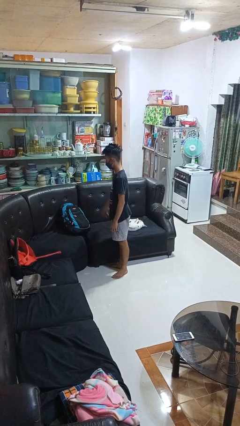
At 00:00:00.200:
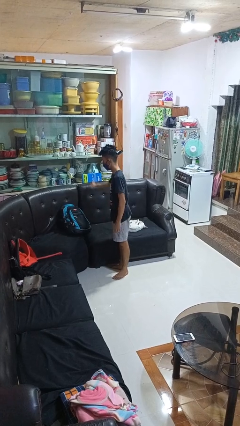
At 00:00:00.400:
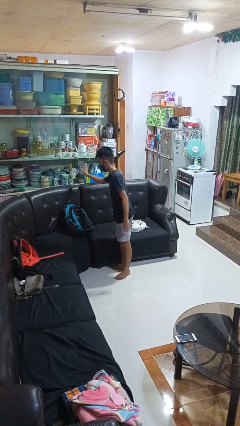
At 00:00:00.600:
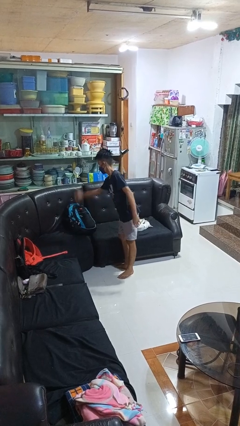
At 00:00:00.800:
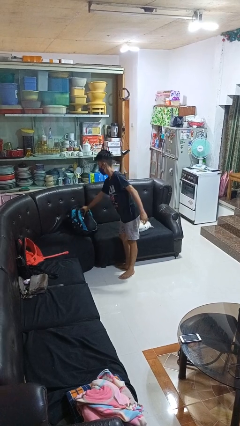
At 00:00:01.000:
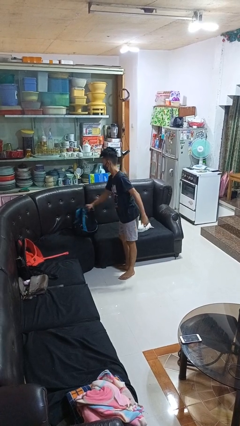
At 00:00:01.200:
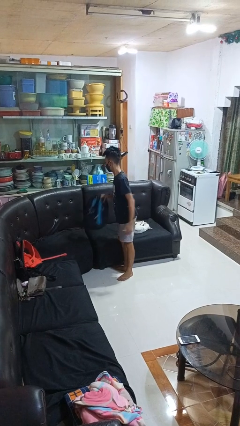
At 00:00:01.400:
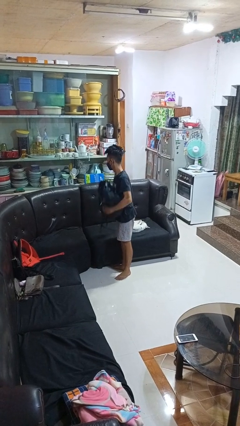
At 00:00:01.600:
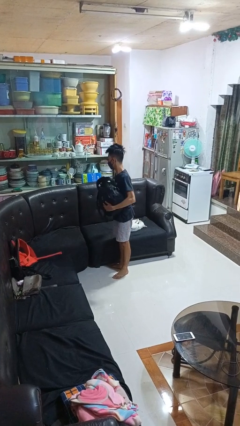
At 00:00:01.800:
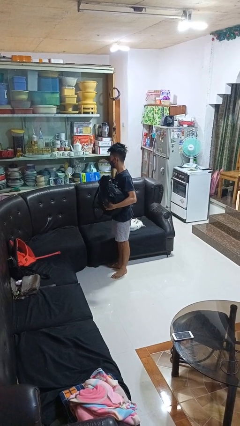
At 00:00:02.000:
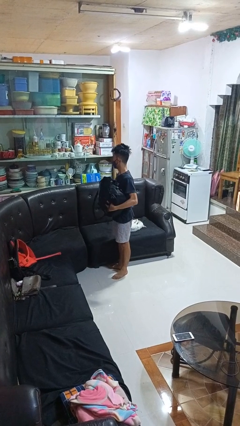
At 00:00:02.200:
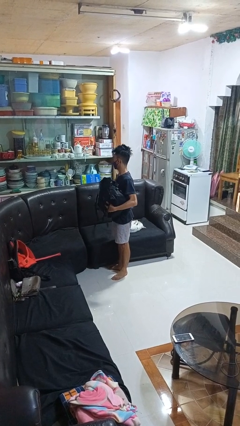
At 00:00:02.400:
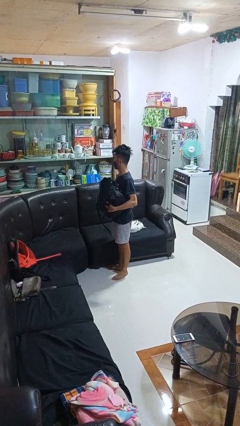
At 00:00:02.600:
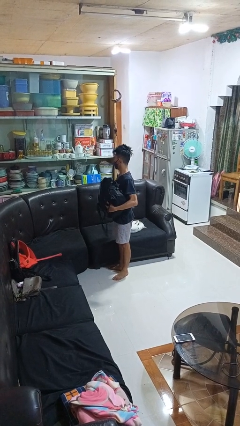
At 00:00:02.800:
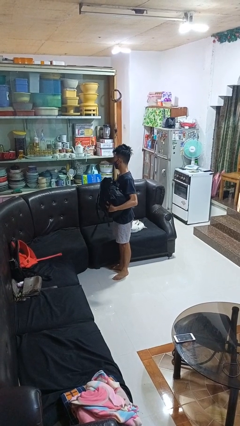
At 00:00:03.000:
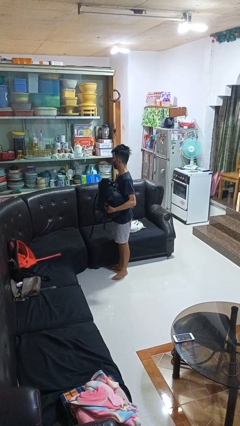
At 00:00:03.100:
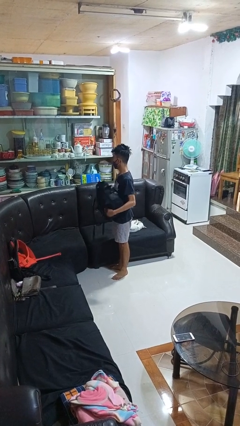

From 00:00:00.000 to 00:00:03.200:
person picks up object from couch

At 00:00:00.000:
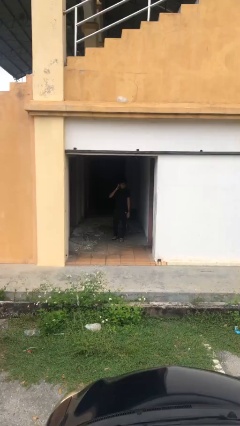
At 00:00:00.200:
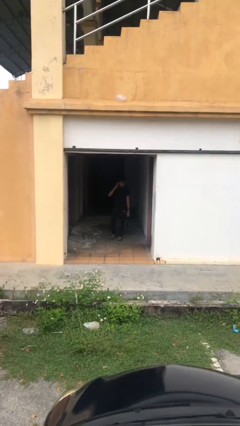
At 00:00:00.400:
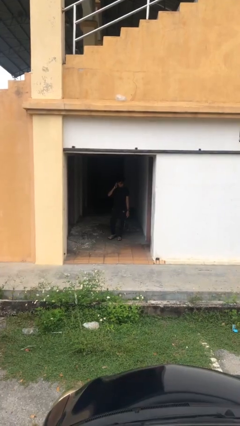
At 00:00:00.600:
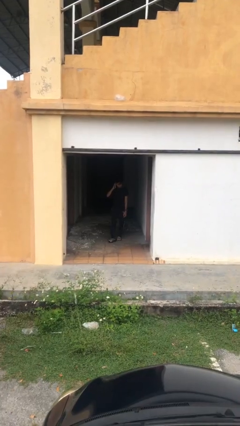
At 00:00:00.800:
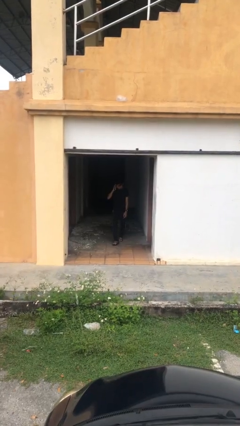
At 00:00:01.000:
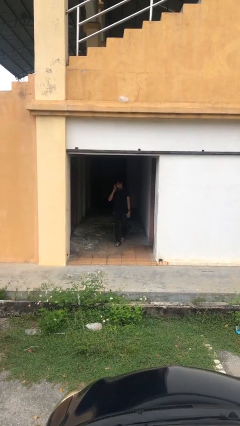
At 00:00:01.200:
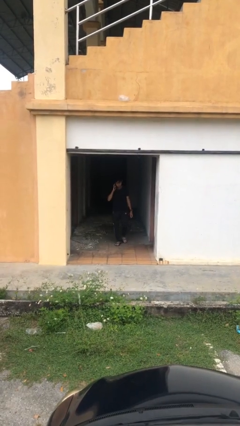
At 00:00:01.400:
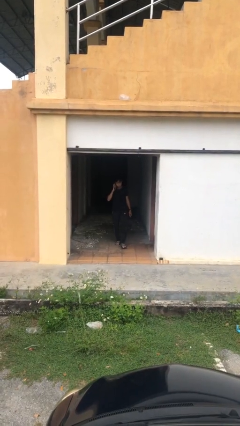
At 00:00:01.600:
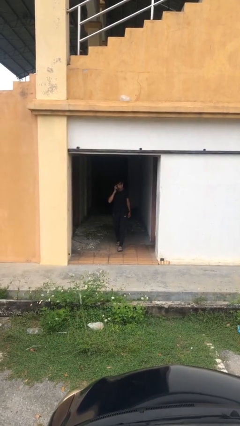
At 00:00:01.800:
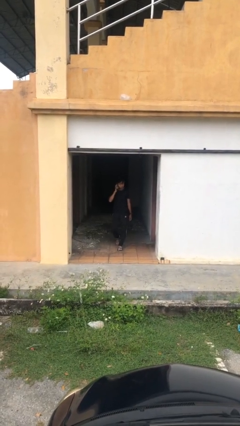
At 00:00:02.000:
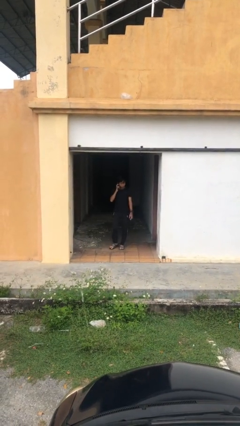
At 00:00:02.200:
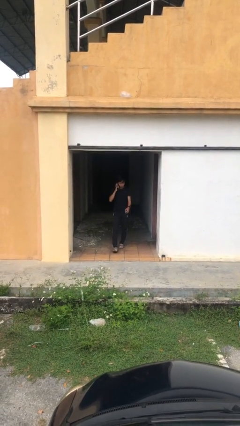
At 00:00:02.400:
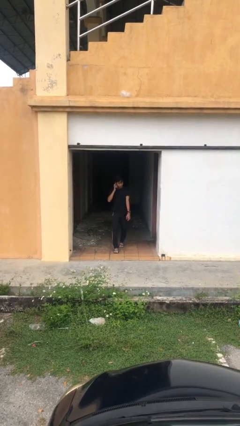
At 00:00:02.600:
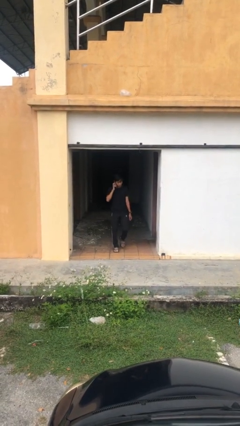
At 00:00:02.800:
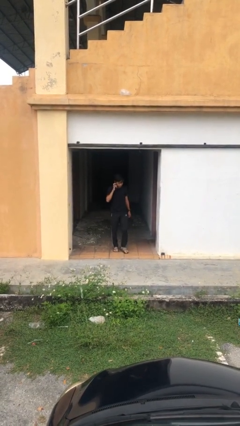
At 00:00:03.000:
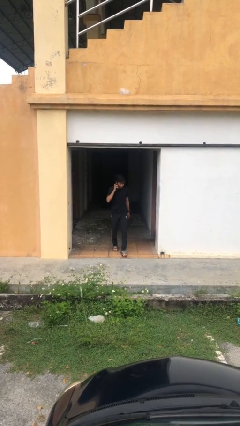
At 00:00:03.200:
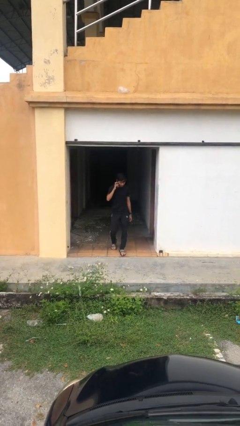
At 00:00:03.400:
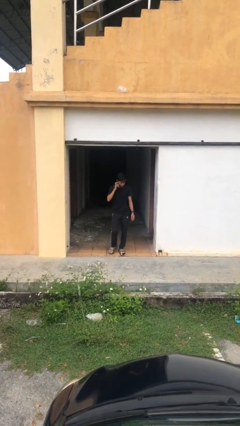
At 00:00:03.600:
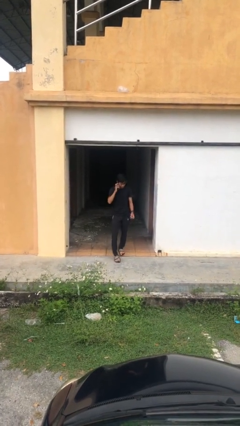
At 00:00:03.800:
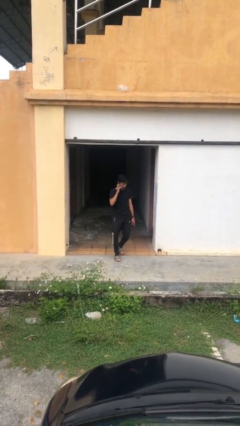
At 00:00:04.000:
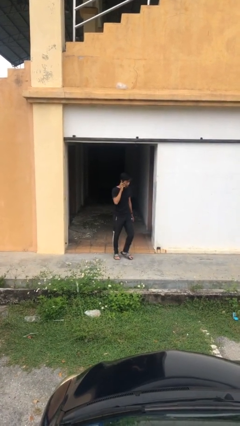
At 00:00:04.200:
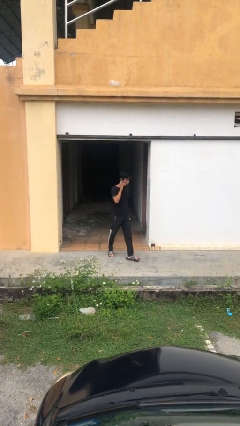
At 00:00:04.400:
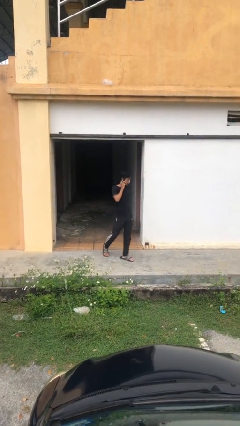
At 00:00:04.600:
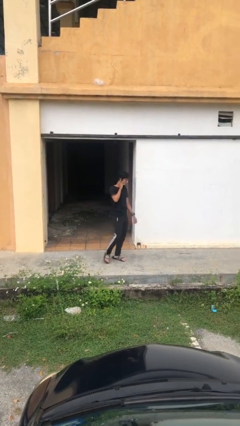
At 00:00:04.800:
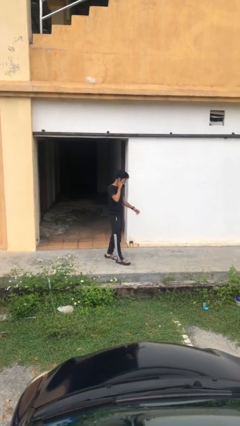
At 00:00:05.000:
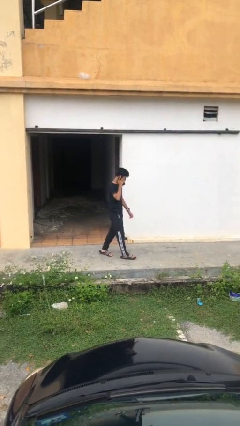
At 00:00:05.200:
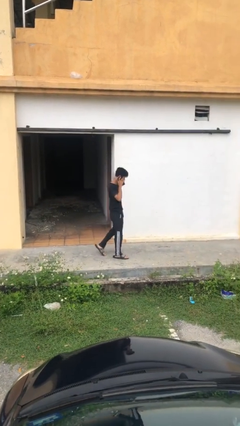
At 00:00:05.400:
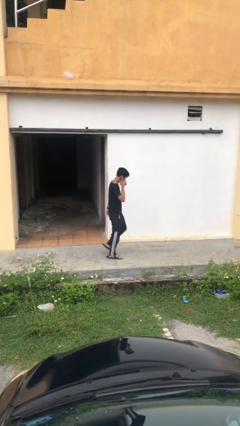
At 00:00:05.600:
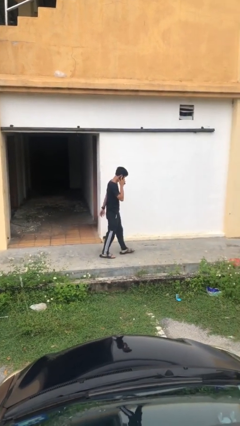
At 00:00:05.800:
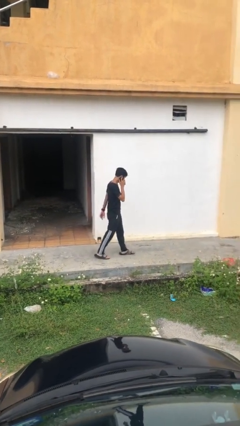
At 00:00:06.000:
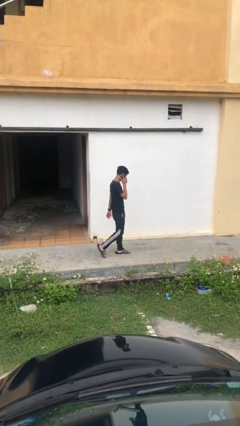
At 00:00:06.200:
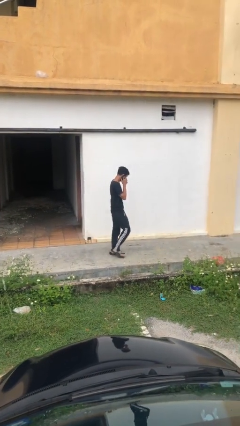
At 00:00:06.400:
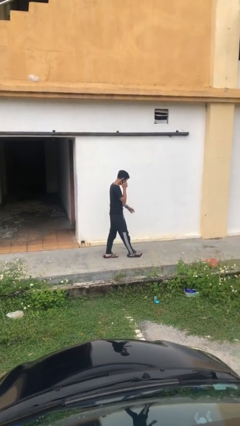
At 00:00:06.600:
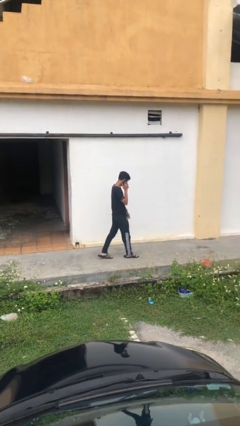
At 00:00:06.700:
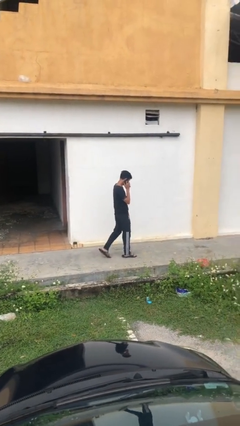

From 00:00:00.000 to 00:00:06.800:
person enters scene through structure

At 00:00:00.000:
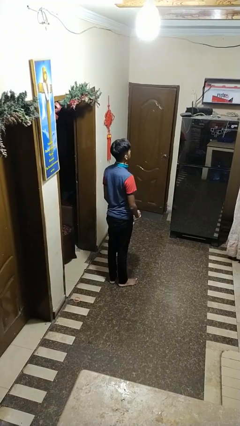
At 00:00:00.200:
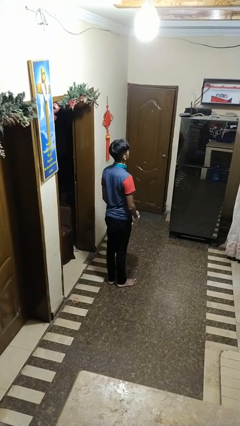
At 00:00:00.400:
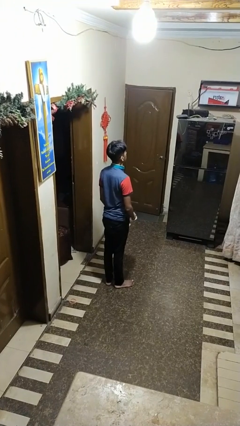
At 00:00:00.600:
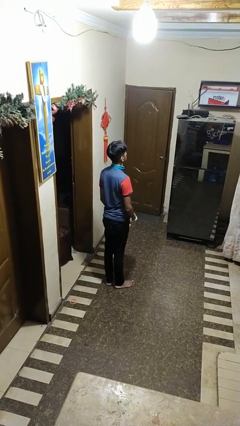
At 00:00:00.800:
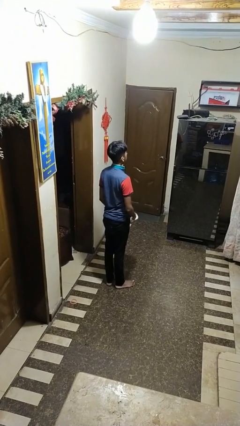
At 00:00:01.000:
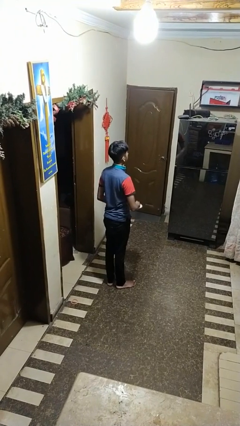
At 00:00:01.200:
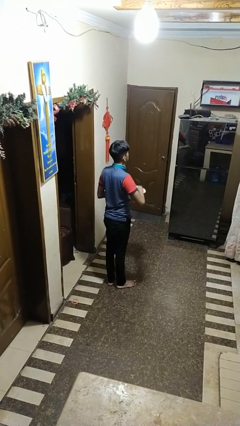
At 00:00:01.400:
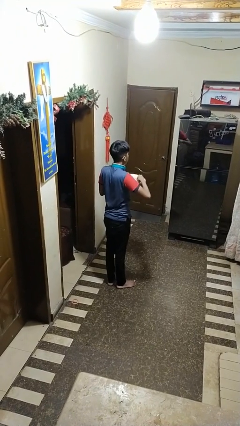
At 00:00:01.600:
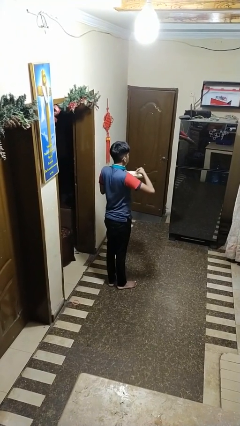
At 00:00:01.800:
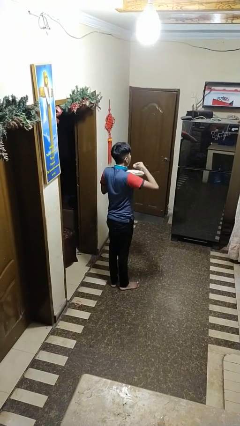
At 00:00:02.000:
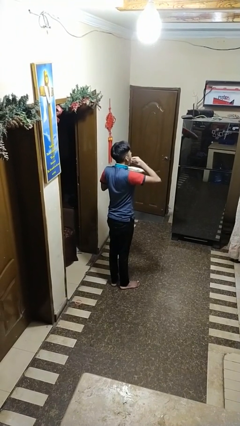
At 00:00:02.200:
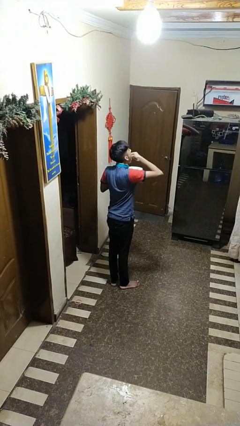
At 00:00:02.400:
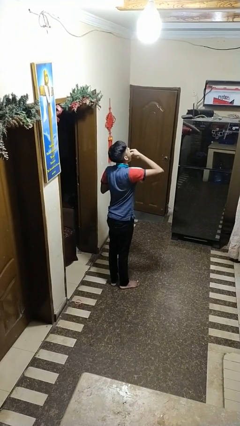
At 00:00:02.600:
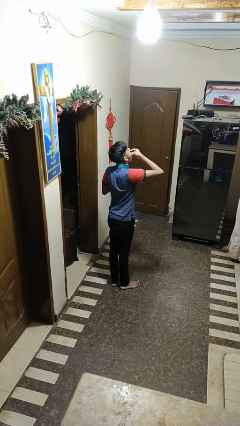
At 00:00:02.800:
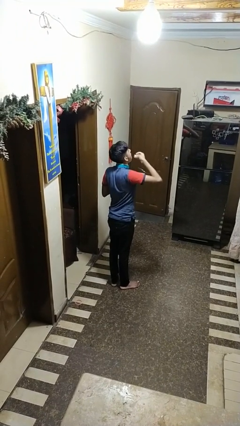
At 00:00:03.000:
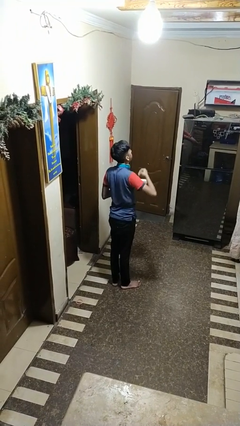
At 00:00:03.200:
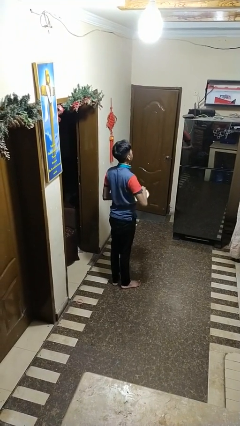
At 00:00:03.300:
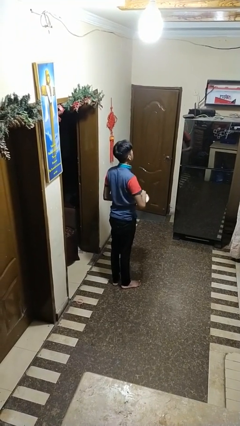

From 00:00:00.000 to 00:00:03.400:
person eats with hands

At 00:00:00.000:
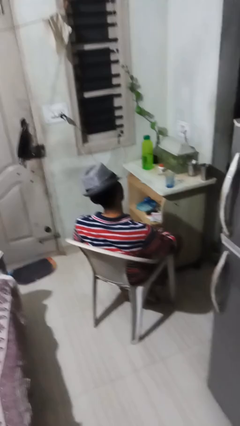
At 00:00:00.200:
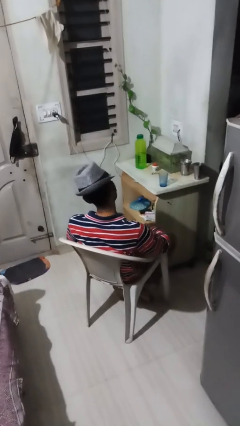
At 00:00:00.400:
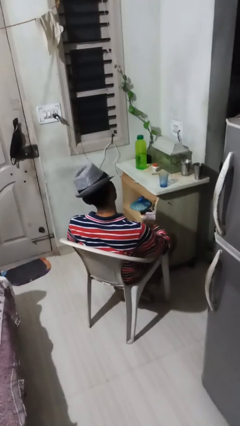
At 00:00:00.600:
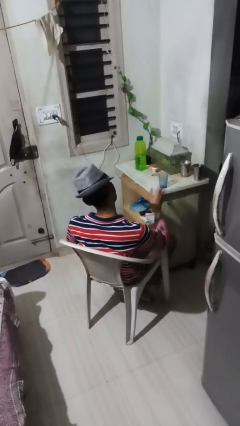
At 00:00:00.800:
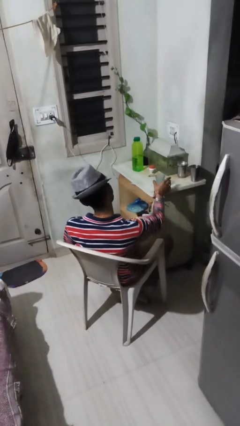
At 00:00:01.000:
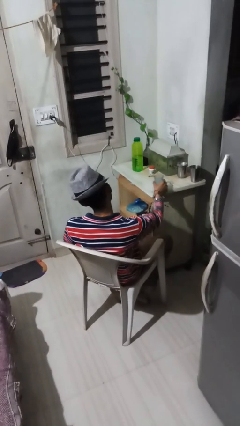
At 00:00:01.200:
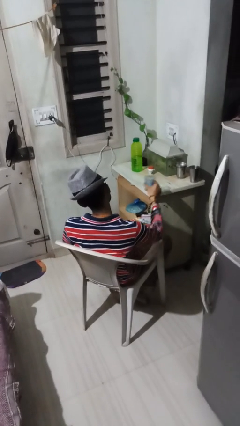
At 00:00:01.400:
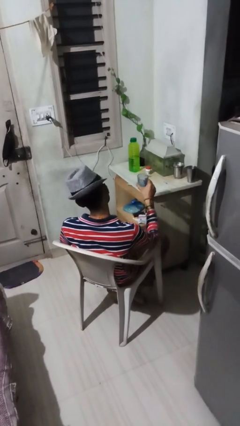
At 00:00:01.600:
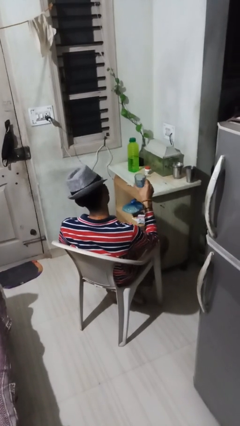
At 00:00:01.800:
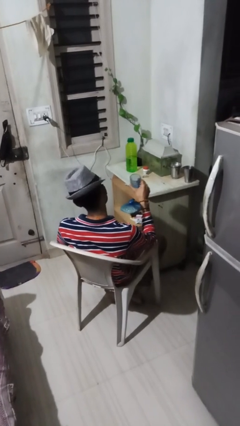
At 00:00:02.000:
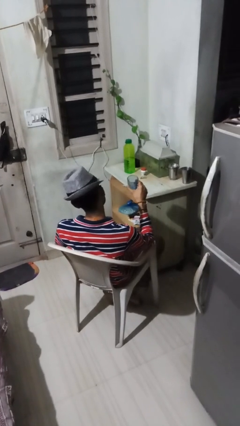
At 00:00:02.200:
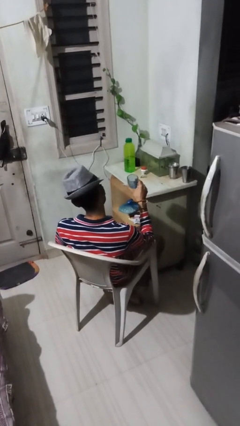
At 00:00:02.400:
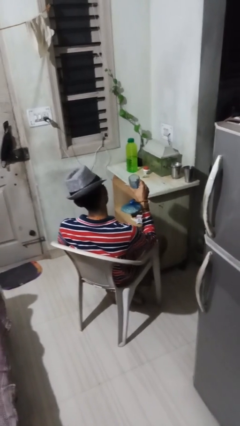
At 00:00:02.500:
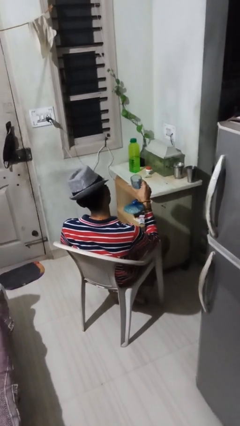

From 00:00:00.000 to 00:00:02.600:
person picks up object from table

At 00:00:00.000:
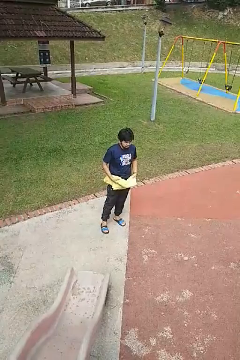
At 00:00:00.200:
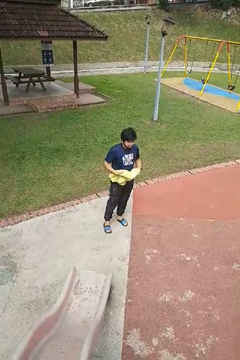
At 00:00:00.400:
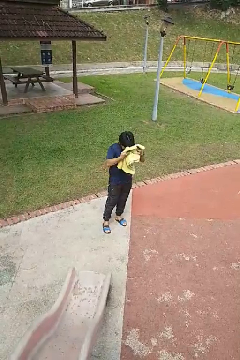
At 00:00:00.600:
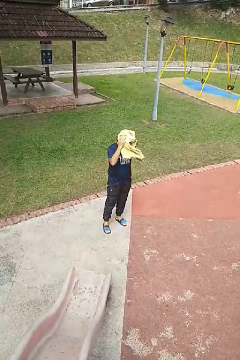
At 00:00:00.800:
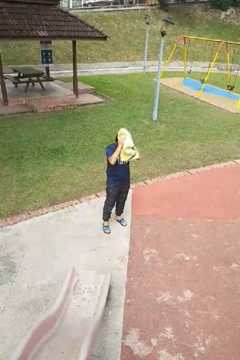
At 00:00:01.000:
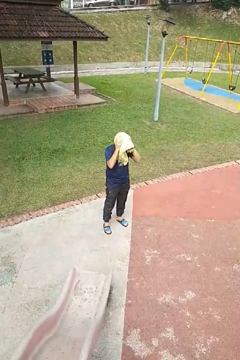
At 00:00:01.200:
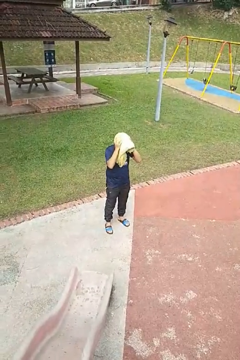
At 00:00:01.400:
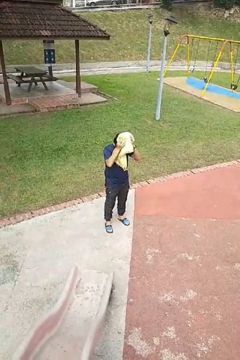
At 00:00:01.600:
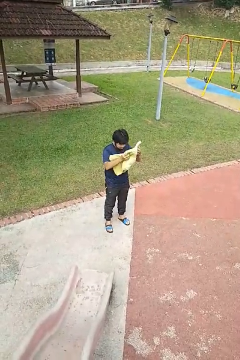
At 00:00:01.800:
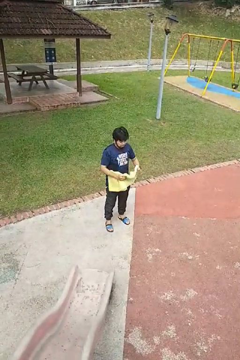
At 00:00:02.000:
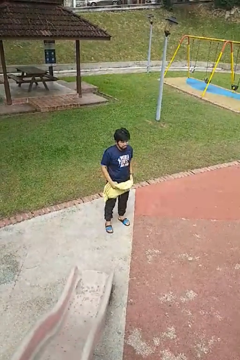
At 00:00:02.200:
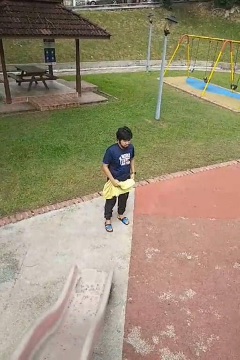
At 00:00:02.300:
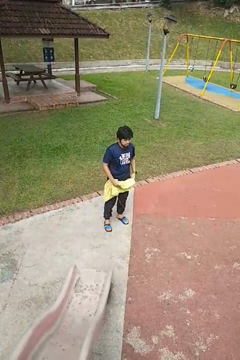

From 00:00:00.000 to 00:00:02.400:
person dries hair with towel
